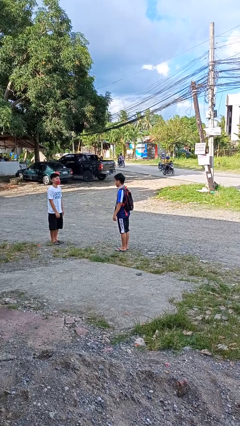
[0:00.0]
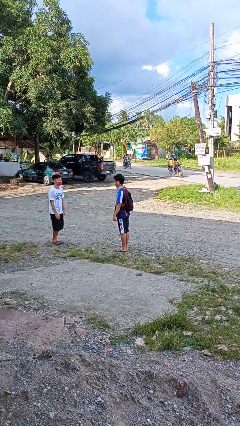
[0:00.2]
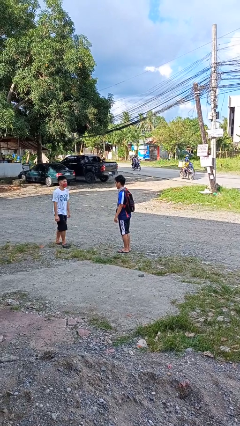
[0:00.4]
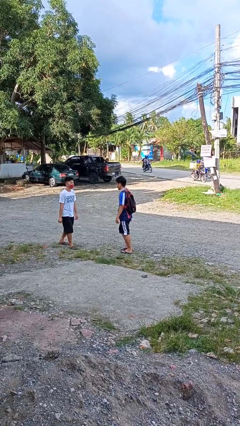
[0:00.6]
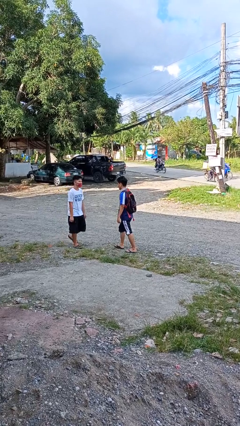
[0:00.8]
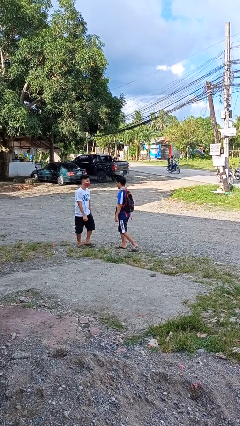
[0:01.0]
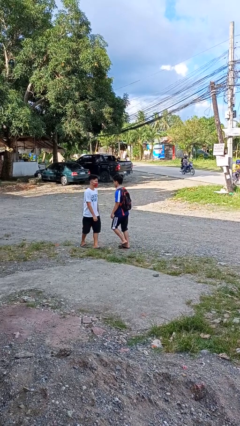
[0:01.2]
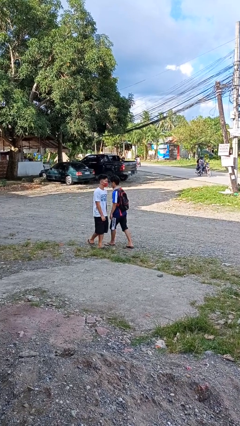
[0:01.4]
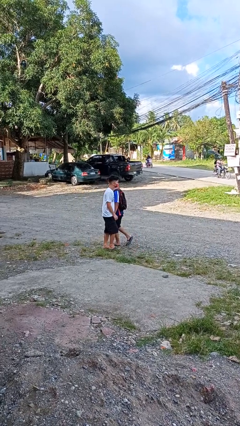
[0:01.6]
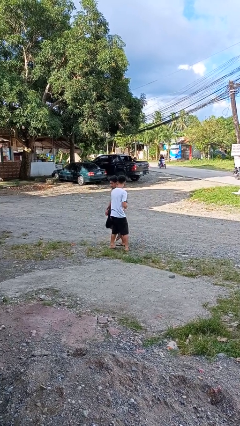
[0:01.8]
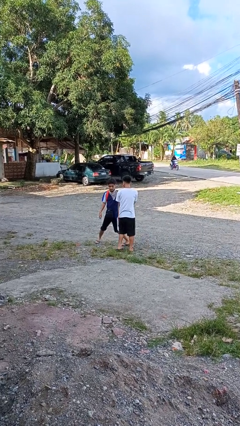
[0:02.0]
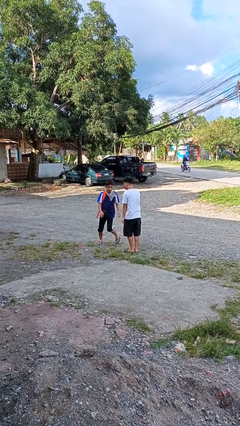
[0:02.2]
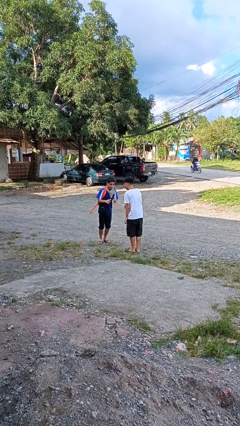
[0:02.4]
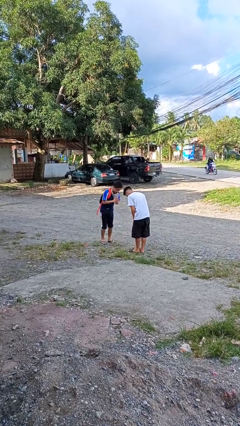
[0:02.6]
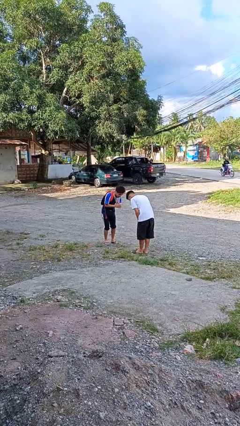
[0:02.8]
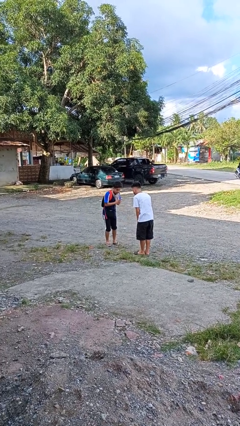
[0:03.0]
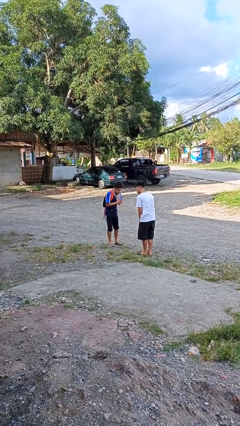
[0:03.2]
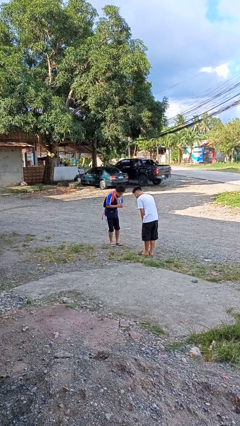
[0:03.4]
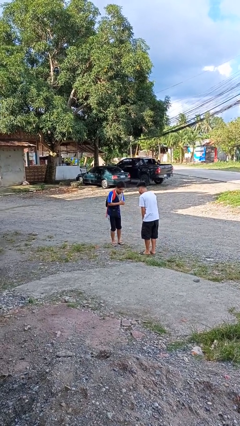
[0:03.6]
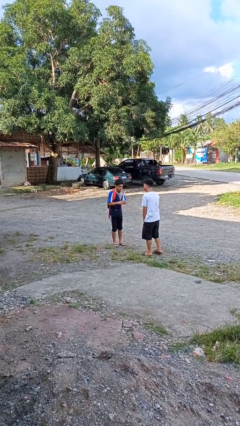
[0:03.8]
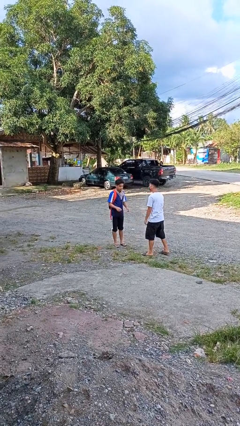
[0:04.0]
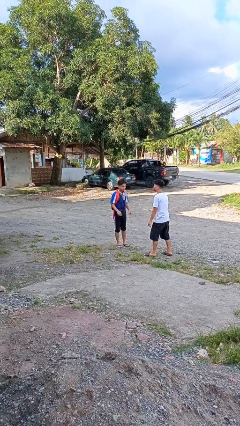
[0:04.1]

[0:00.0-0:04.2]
person bumps into person

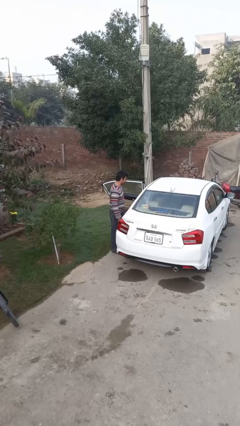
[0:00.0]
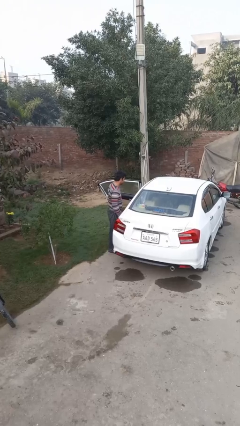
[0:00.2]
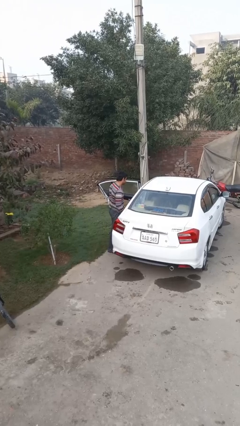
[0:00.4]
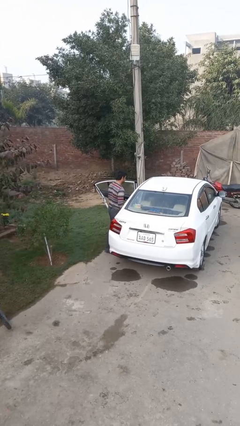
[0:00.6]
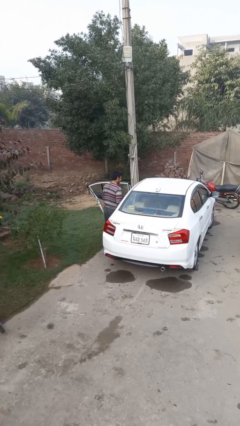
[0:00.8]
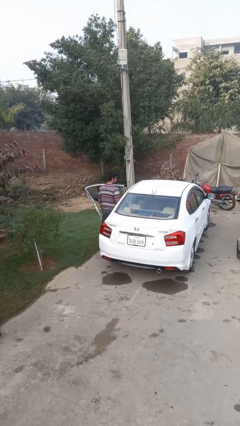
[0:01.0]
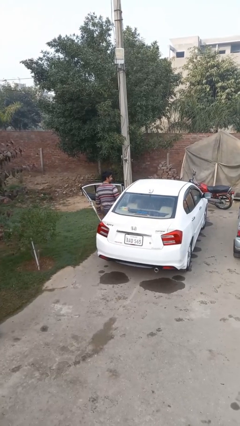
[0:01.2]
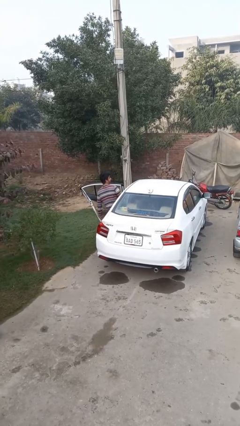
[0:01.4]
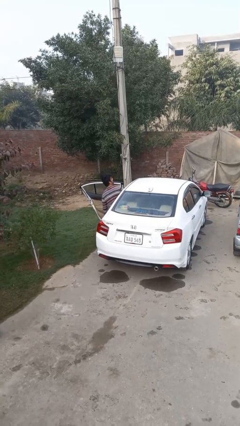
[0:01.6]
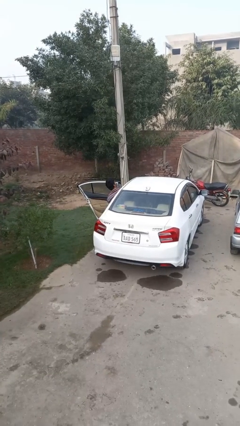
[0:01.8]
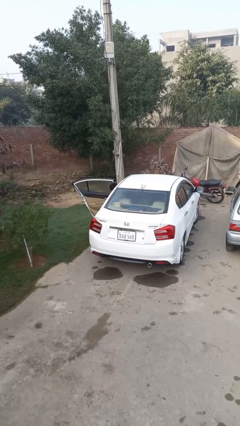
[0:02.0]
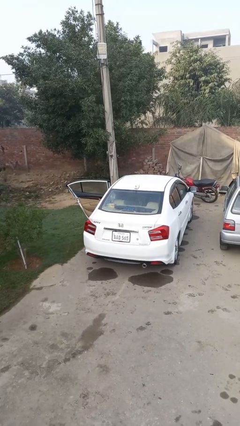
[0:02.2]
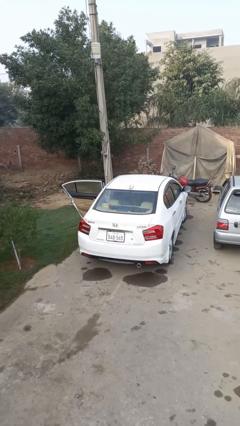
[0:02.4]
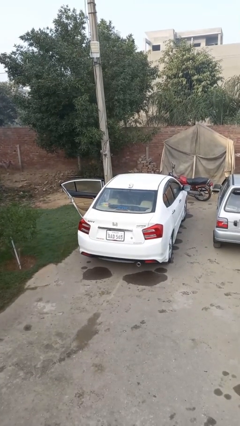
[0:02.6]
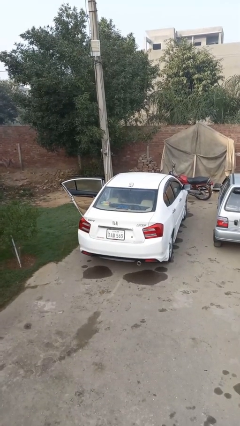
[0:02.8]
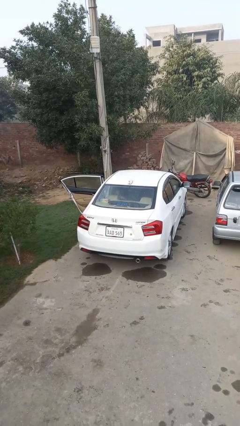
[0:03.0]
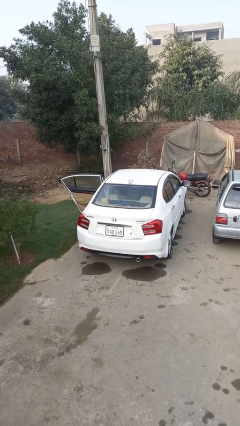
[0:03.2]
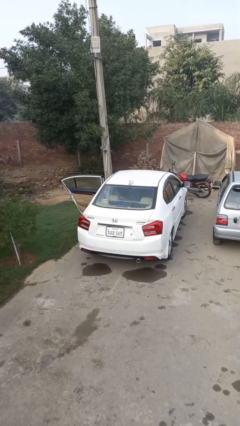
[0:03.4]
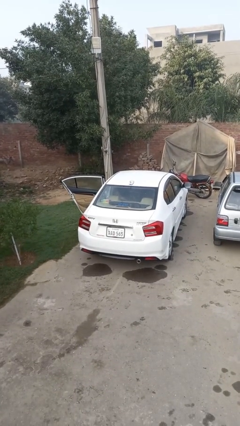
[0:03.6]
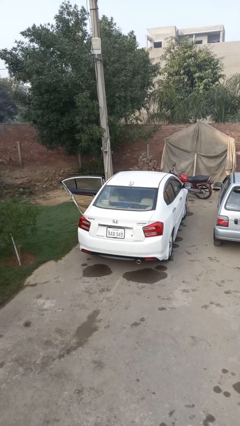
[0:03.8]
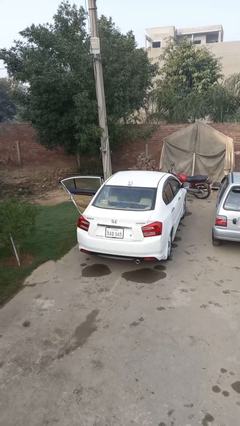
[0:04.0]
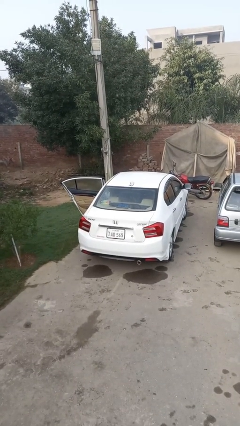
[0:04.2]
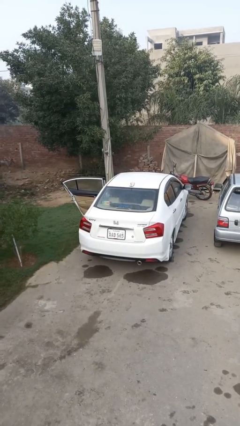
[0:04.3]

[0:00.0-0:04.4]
person enters car

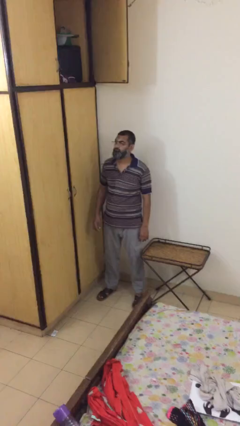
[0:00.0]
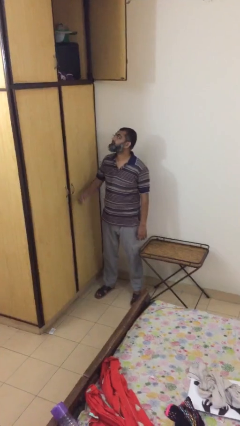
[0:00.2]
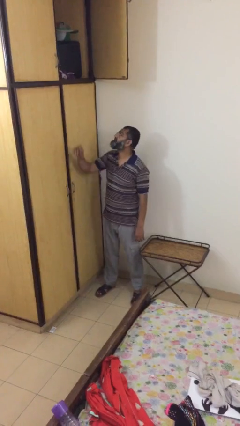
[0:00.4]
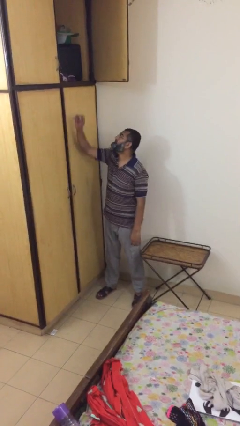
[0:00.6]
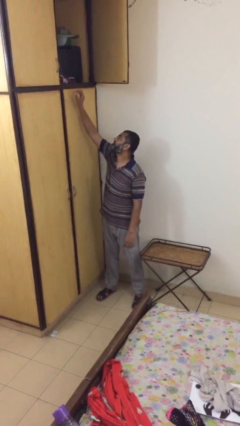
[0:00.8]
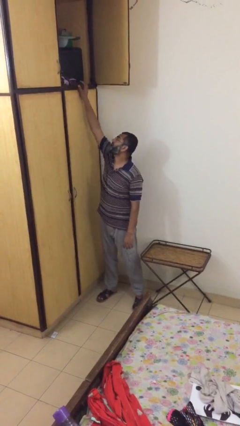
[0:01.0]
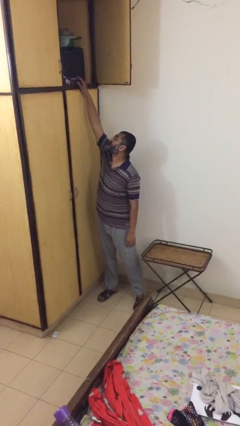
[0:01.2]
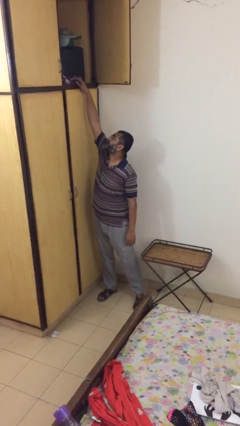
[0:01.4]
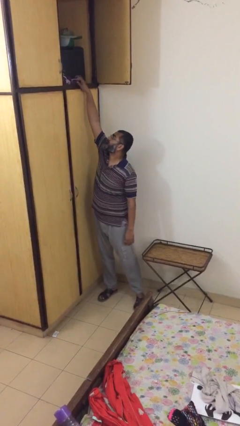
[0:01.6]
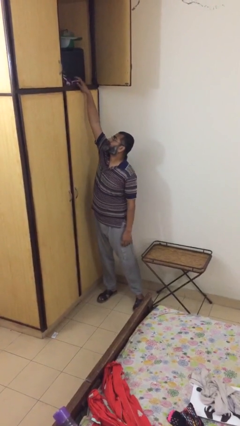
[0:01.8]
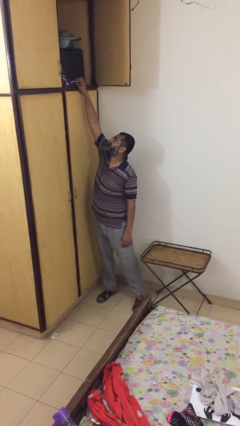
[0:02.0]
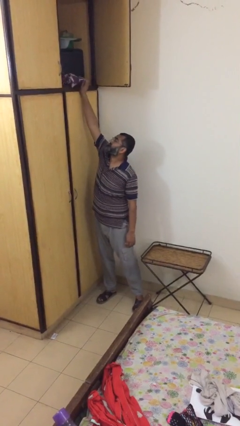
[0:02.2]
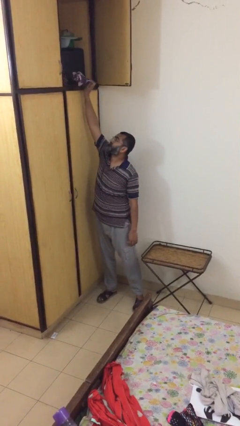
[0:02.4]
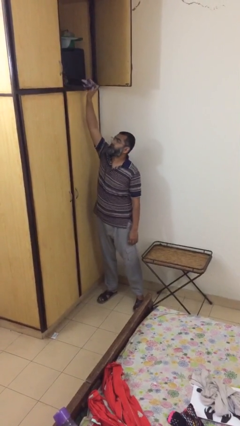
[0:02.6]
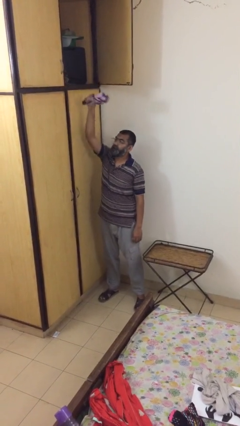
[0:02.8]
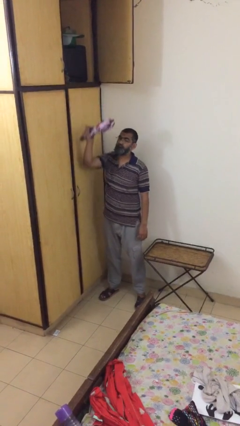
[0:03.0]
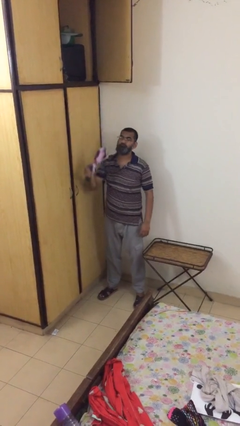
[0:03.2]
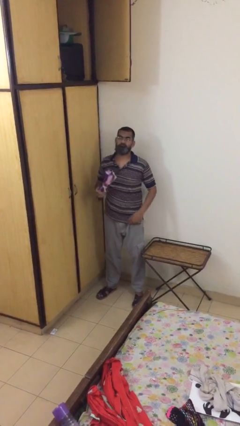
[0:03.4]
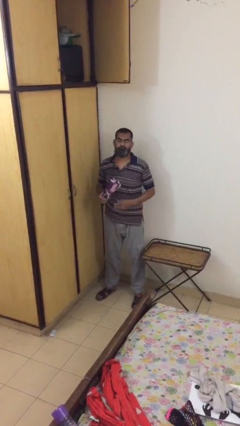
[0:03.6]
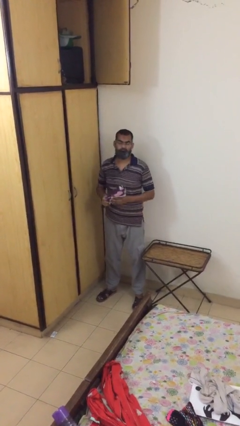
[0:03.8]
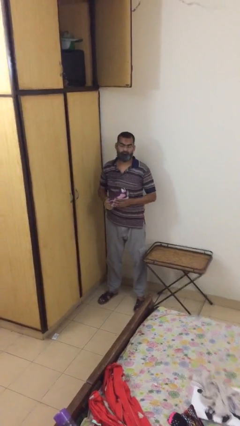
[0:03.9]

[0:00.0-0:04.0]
person picks up object from shelf

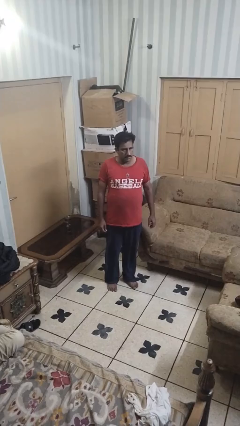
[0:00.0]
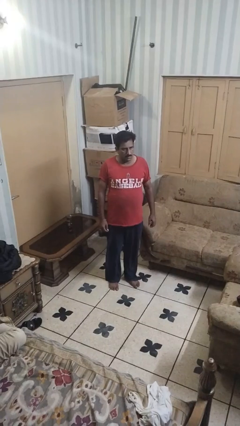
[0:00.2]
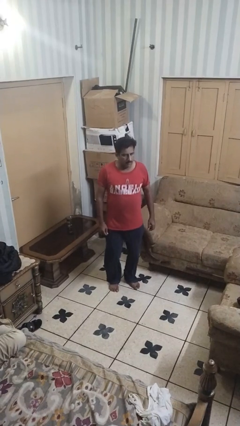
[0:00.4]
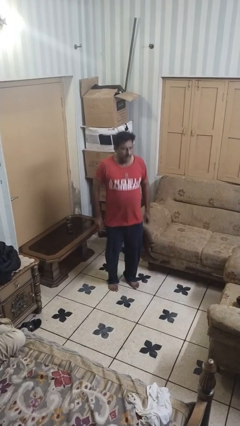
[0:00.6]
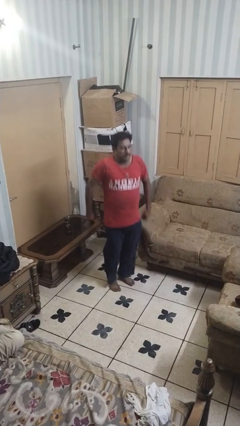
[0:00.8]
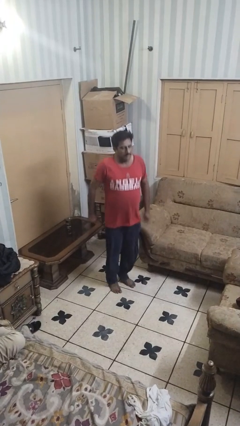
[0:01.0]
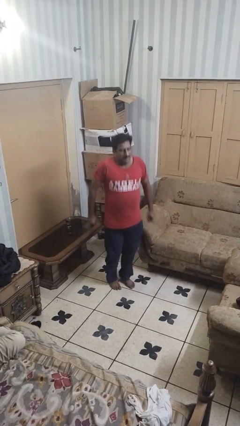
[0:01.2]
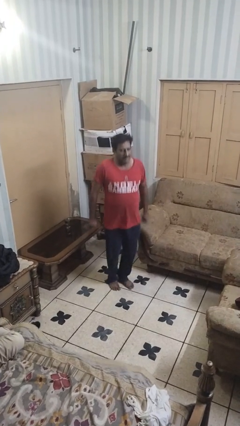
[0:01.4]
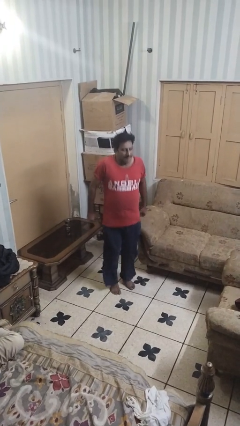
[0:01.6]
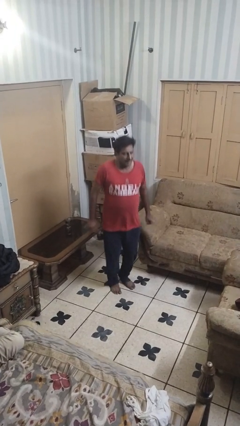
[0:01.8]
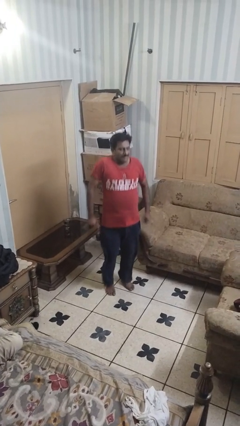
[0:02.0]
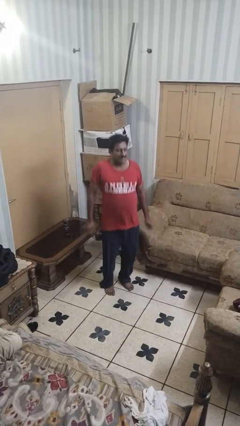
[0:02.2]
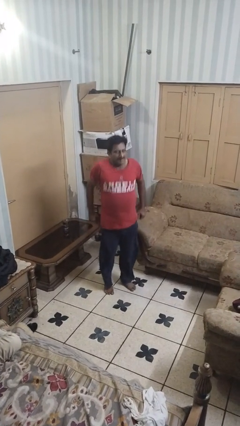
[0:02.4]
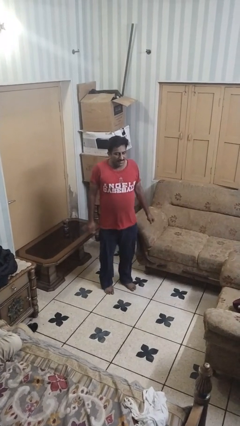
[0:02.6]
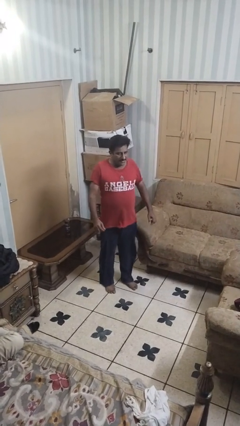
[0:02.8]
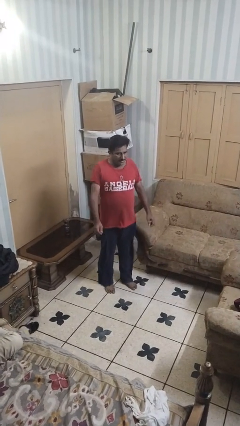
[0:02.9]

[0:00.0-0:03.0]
person jumps

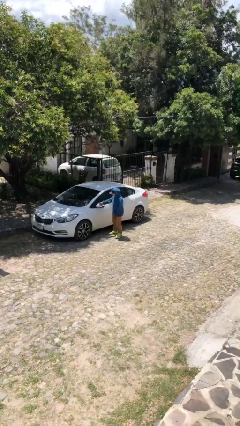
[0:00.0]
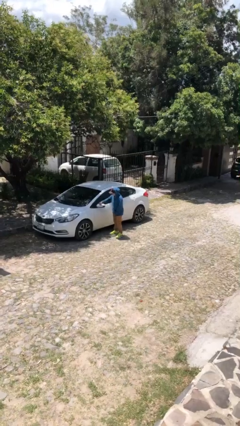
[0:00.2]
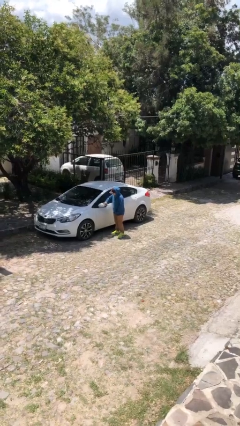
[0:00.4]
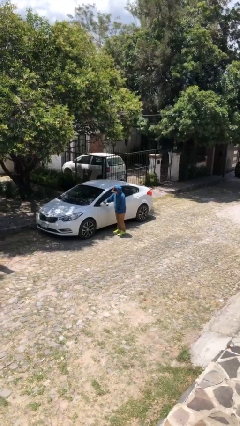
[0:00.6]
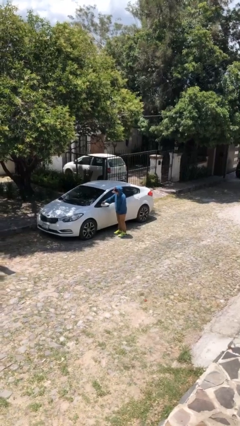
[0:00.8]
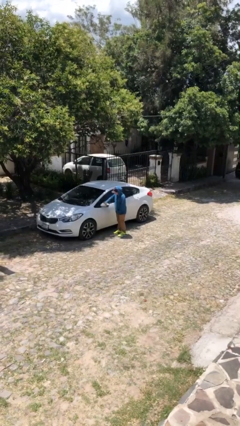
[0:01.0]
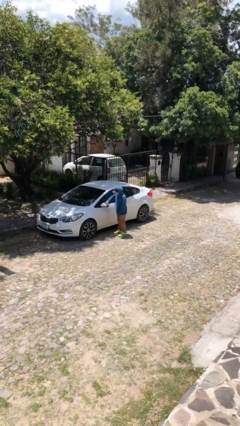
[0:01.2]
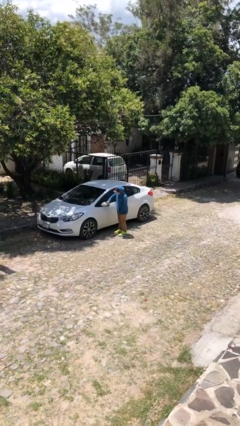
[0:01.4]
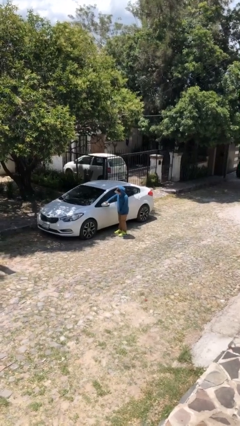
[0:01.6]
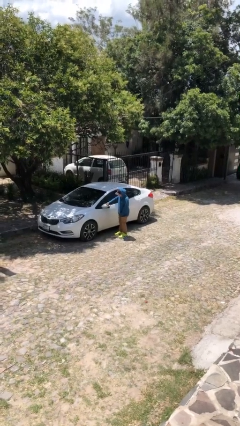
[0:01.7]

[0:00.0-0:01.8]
person polishes car with rag
